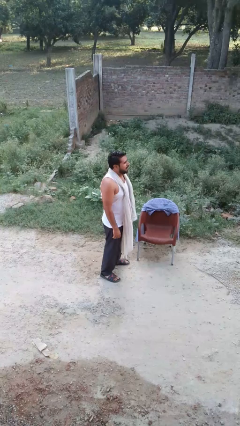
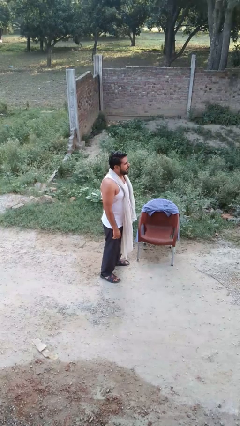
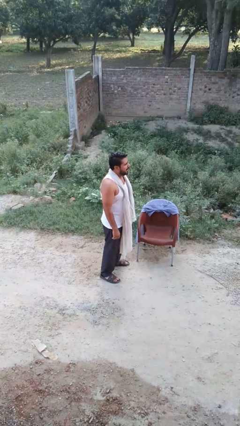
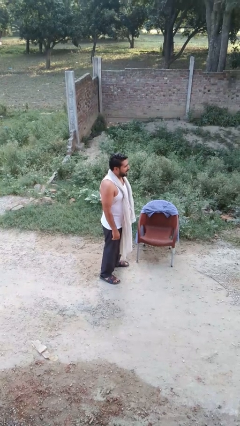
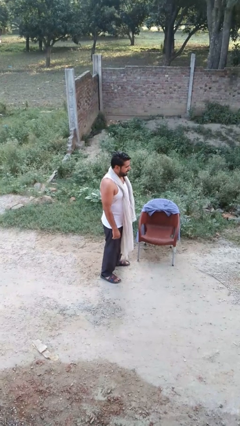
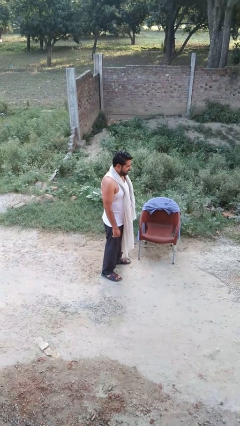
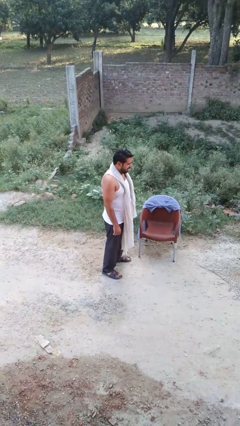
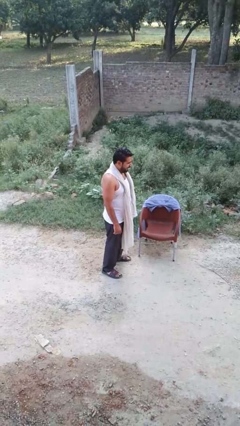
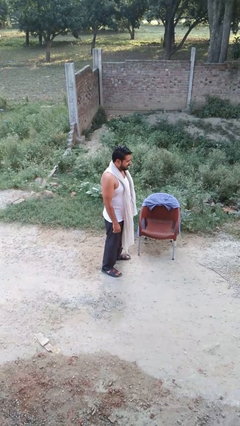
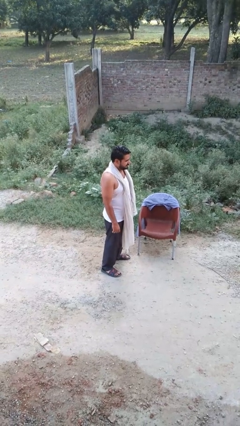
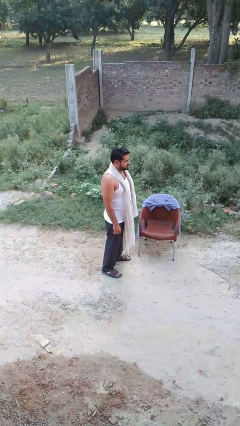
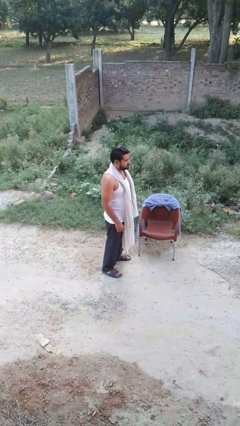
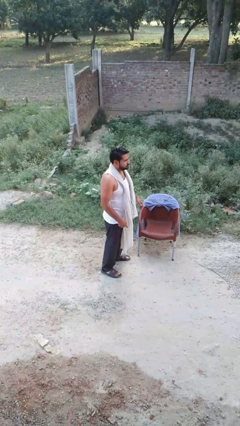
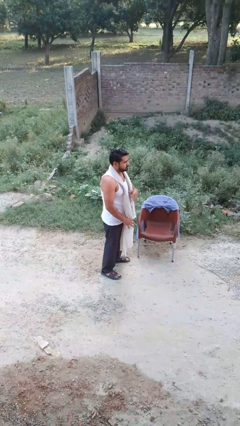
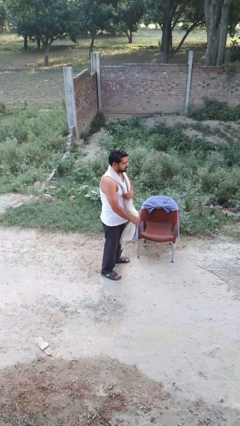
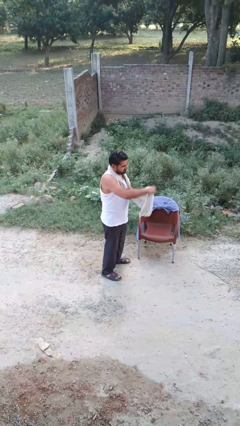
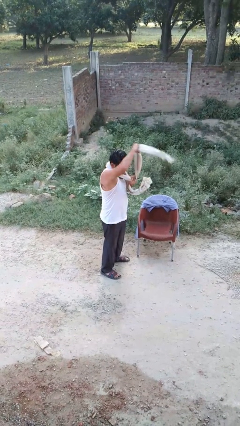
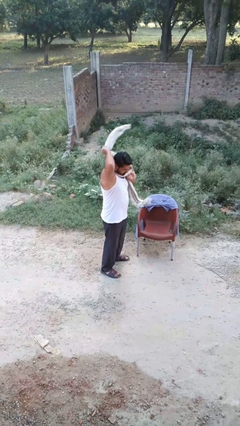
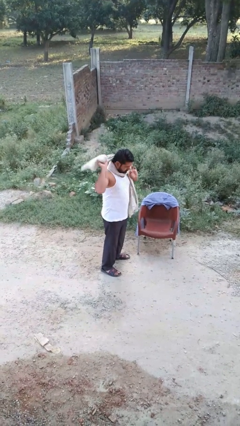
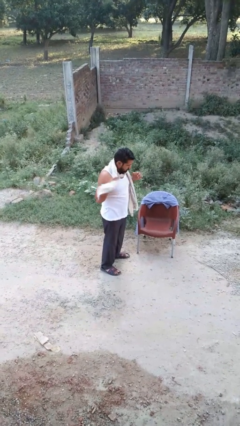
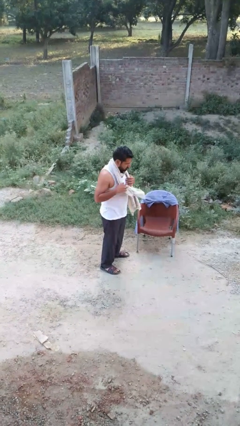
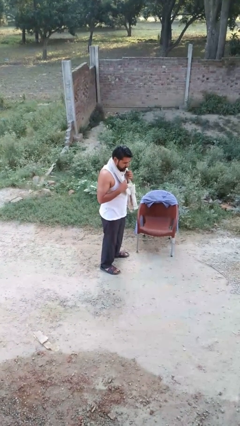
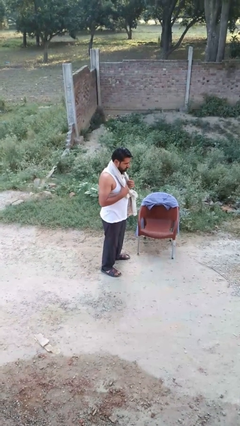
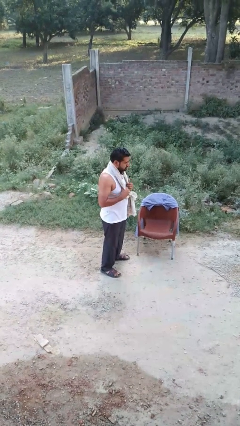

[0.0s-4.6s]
person puts on scarf

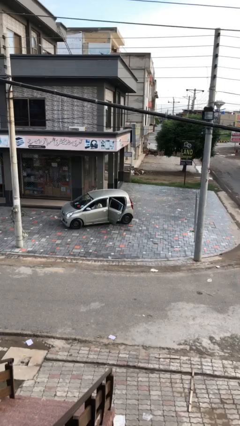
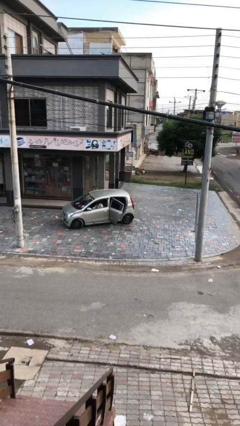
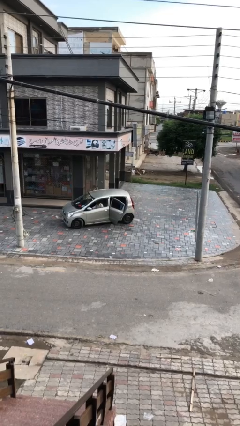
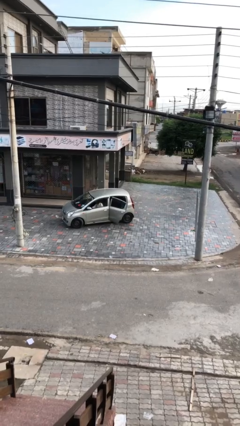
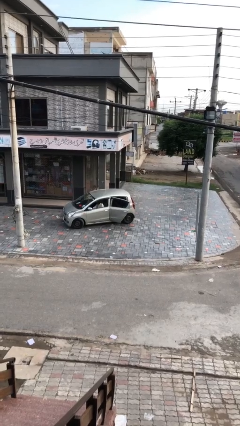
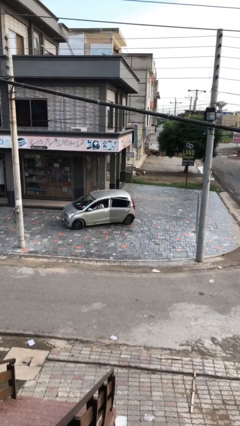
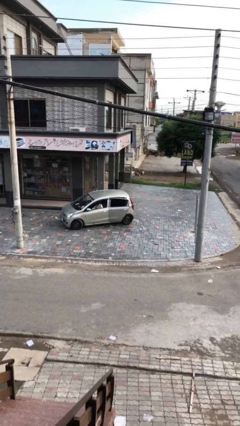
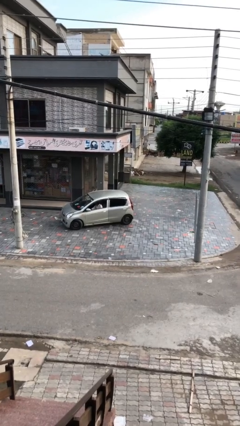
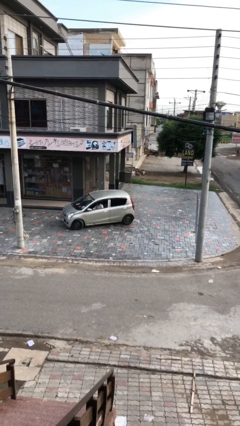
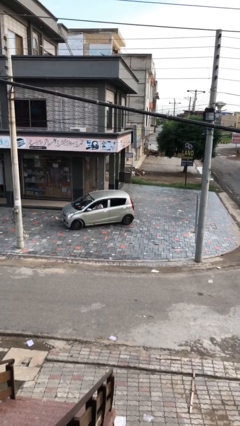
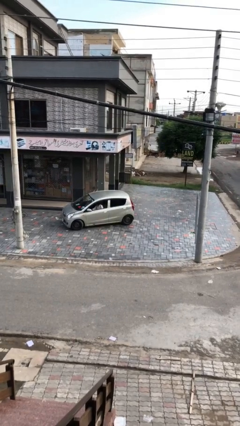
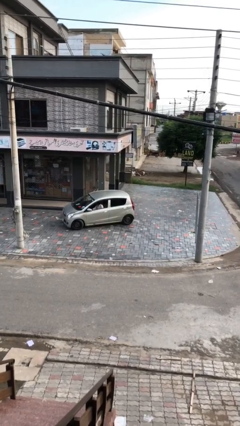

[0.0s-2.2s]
person closes car door

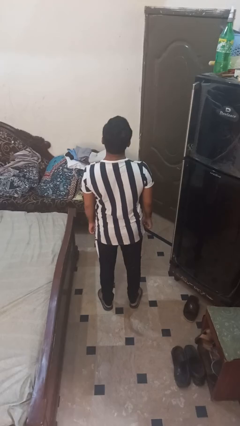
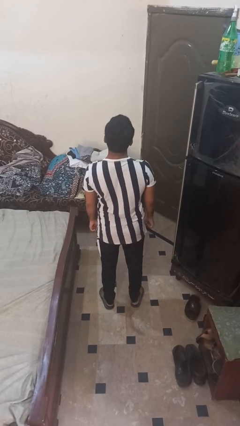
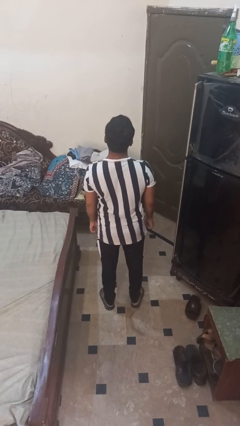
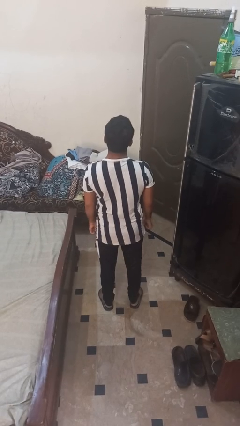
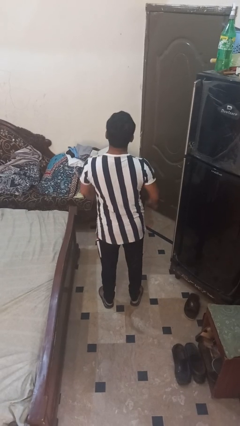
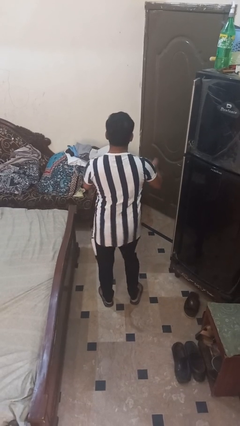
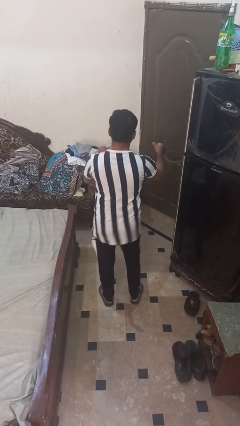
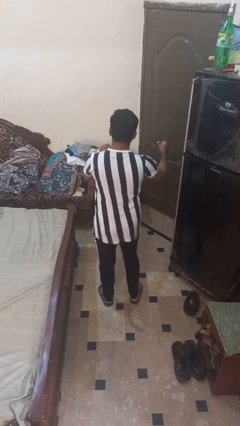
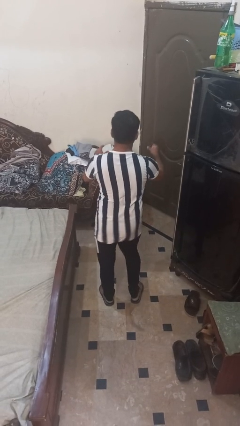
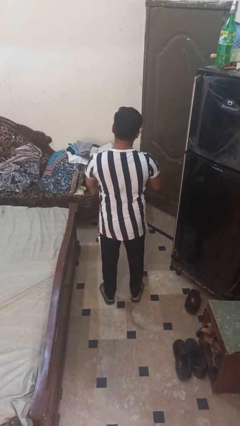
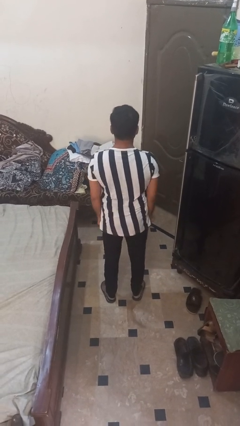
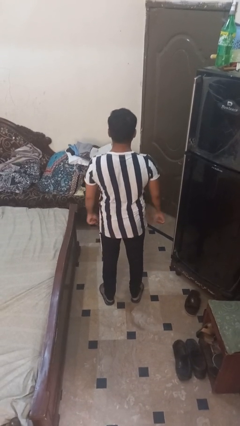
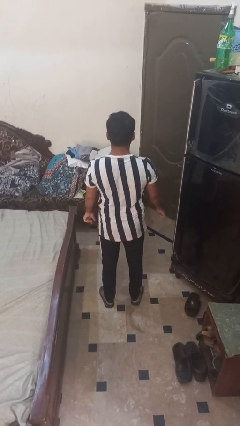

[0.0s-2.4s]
person wiggles hips

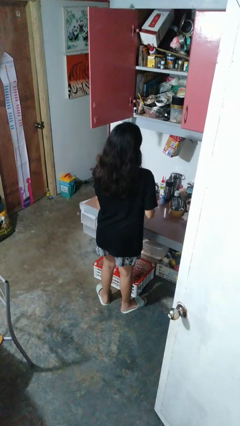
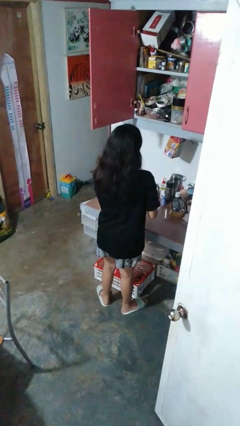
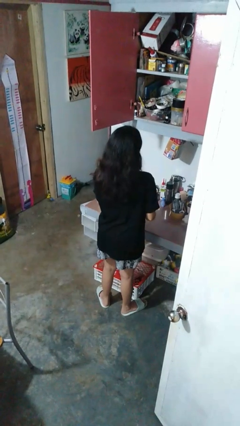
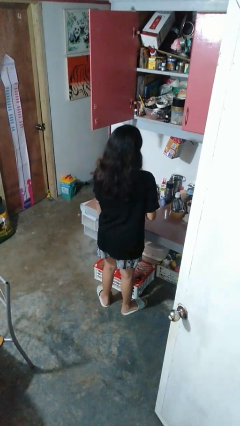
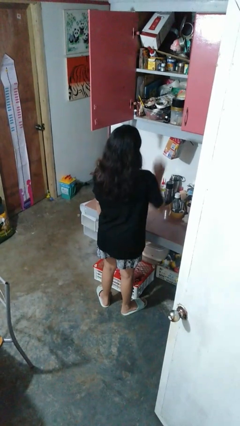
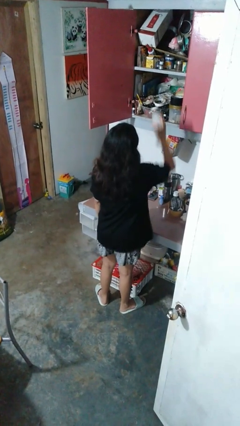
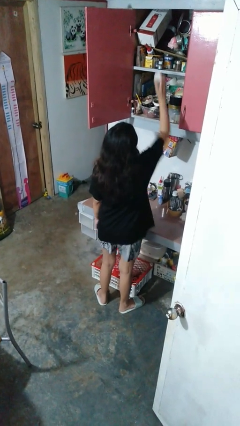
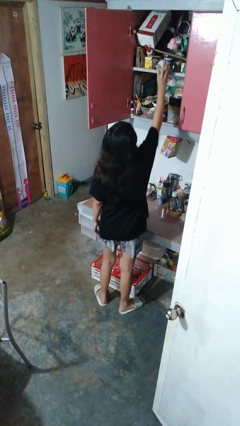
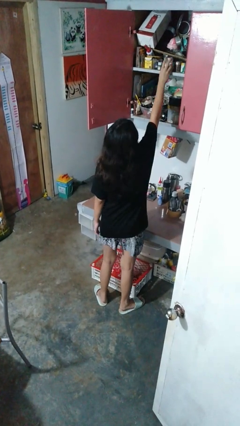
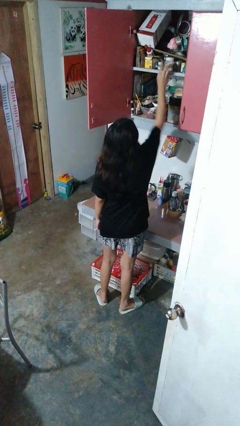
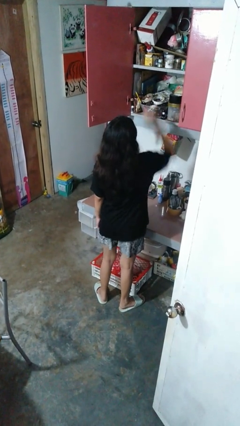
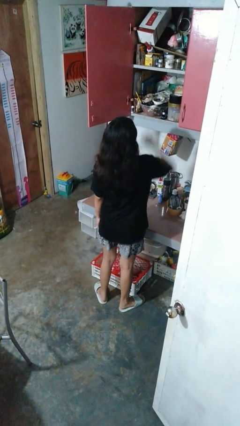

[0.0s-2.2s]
person puts object in cabinet

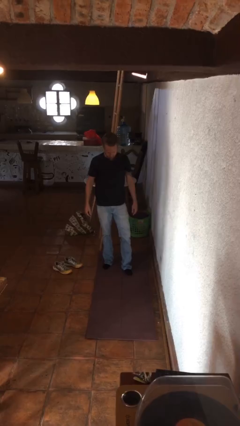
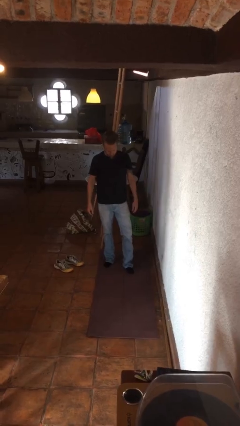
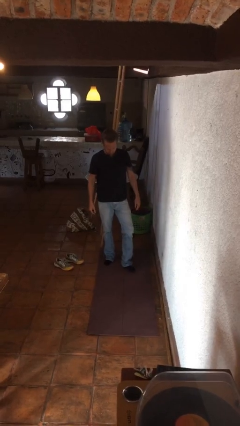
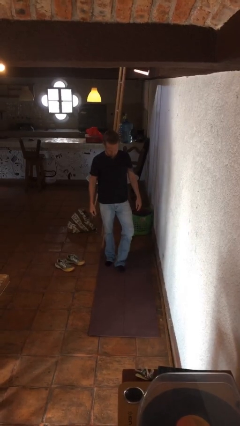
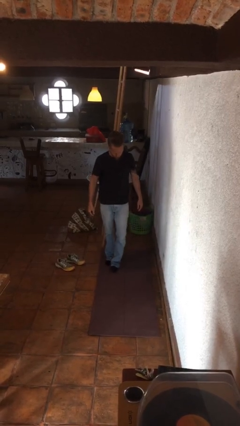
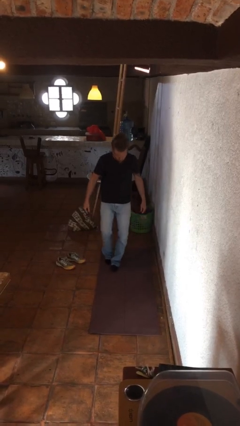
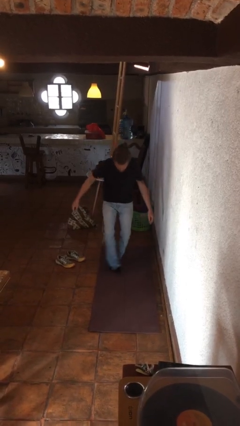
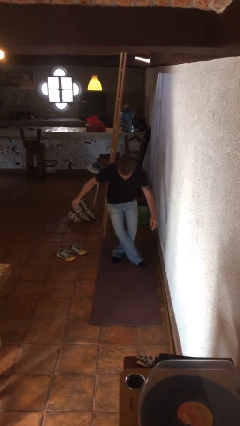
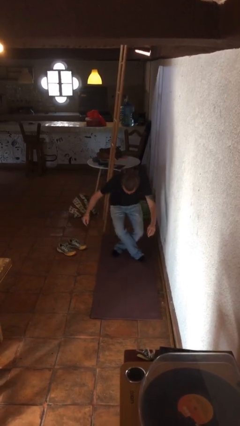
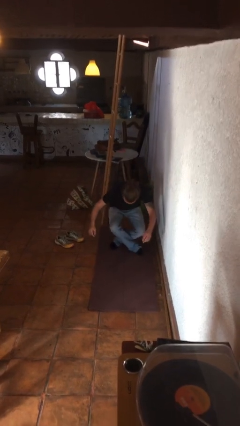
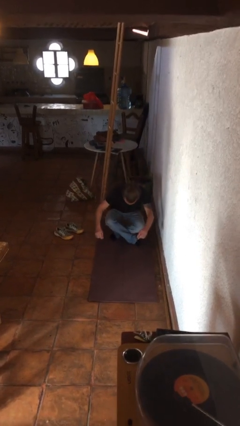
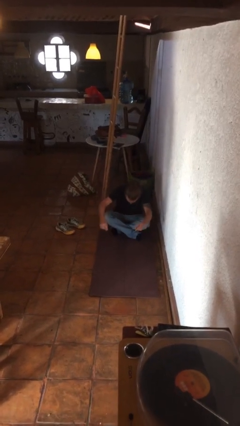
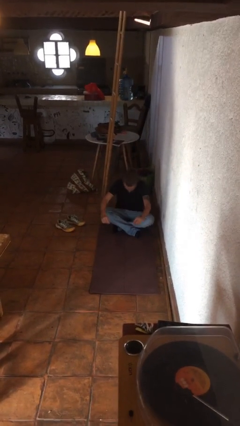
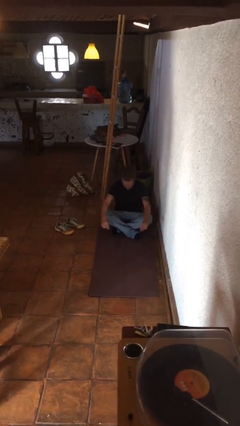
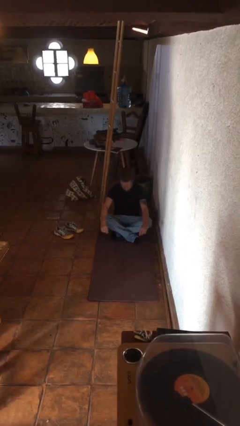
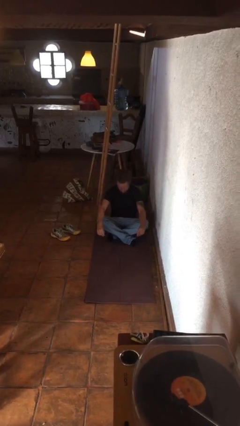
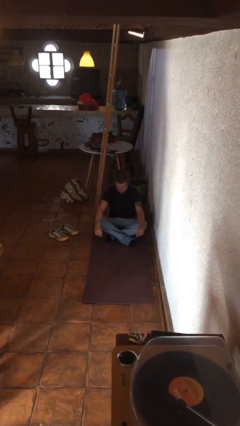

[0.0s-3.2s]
person sits crisscross

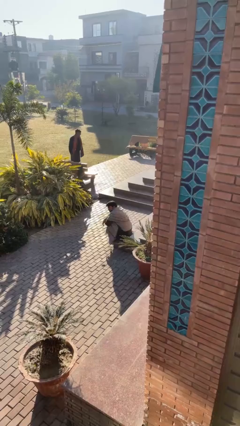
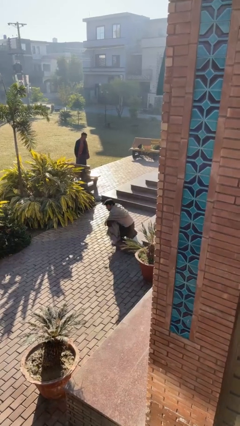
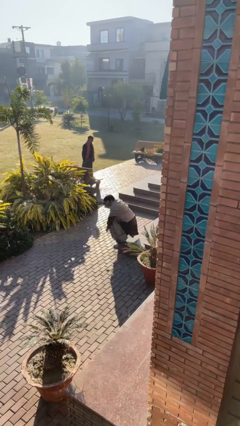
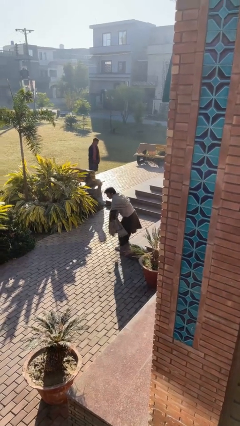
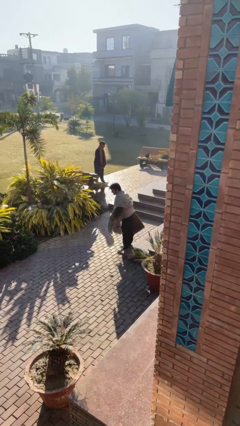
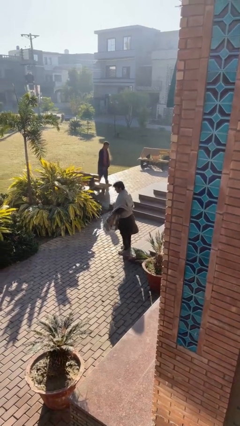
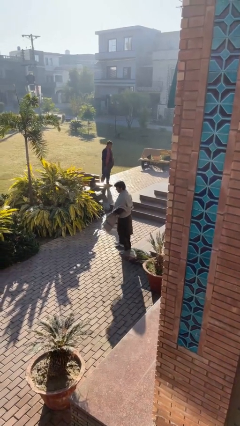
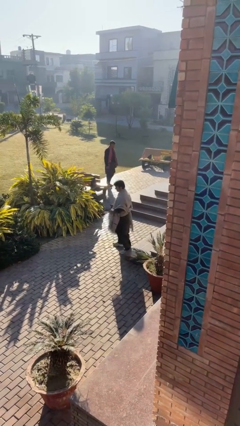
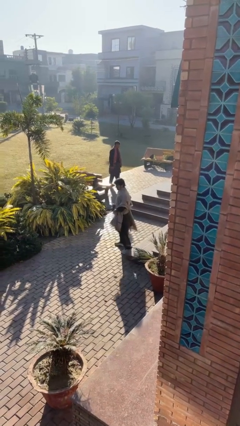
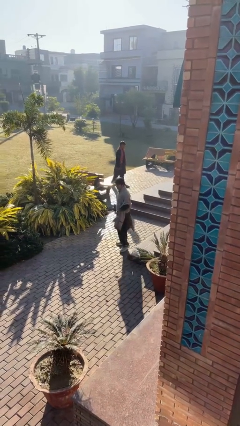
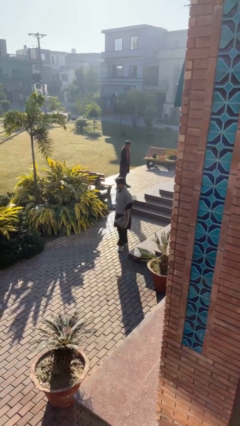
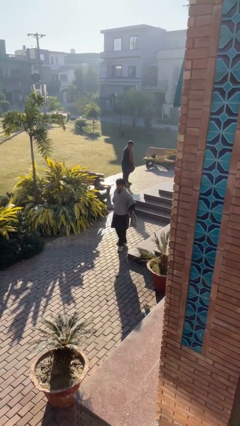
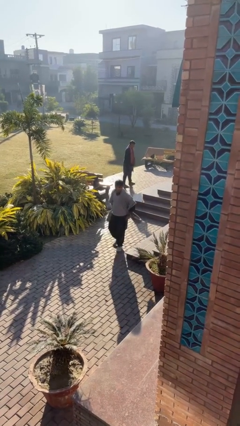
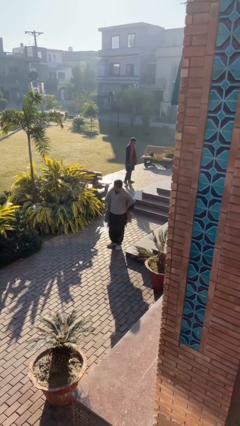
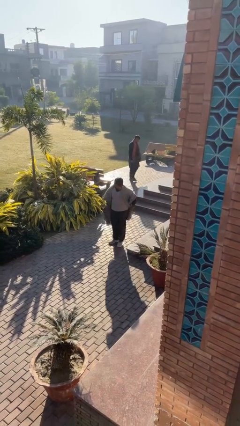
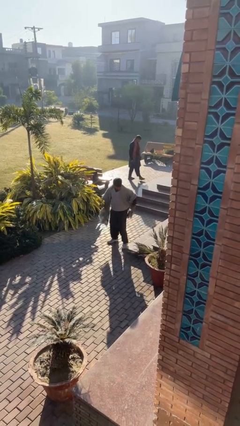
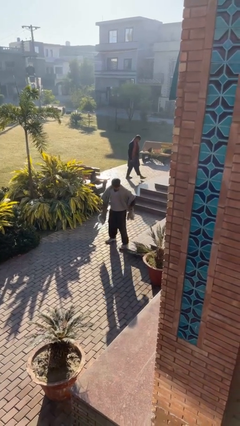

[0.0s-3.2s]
person stands up
